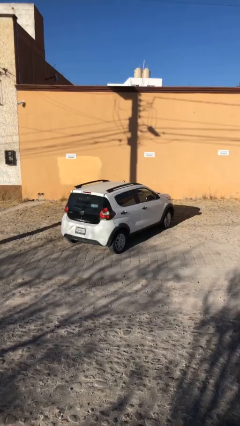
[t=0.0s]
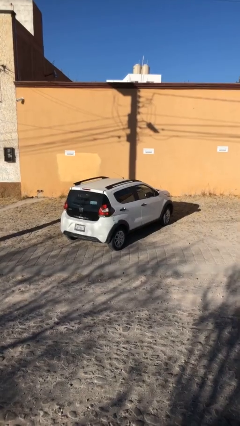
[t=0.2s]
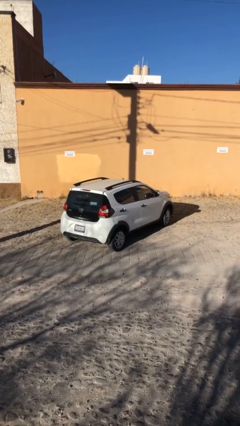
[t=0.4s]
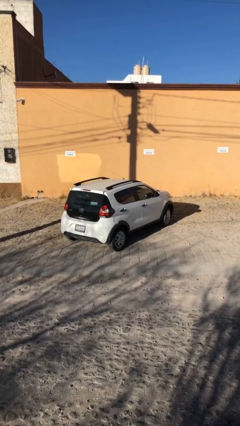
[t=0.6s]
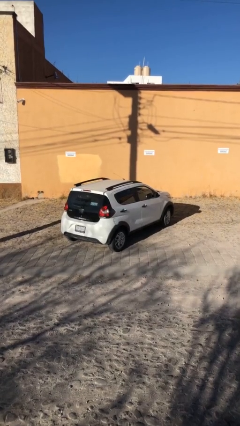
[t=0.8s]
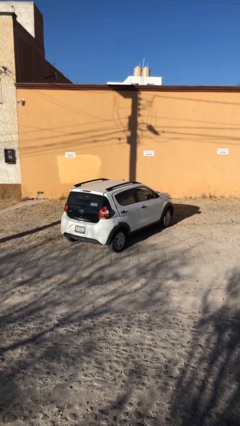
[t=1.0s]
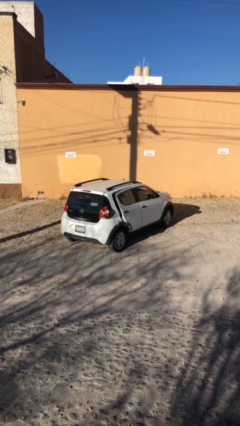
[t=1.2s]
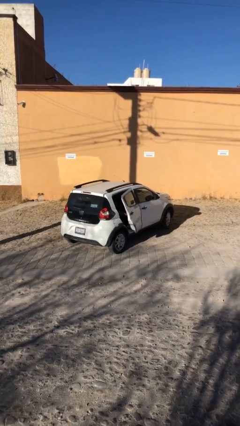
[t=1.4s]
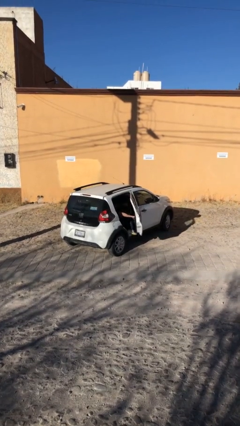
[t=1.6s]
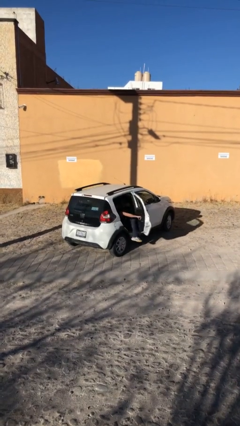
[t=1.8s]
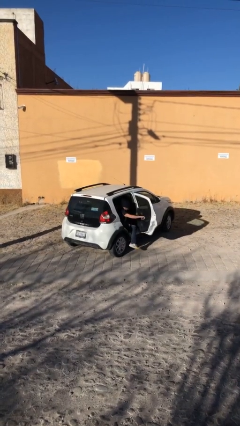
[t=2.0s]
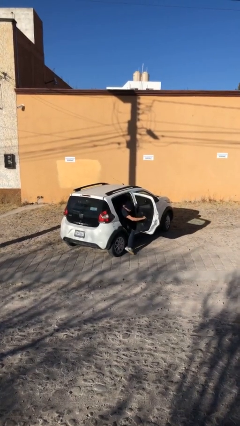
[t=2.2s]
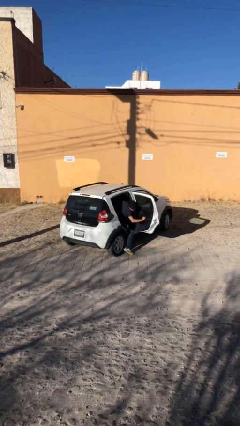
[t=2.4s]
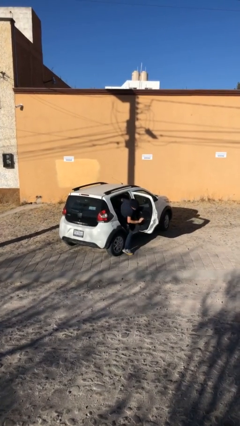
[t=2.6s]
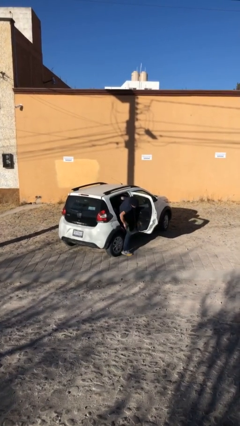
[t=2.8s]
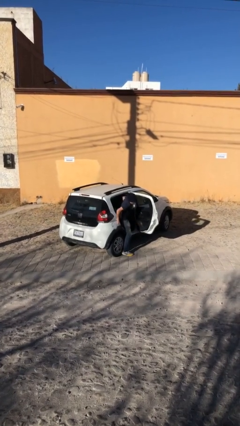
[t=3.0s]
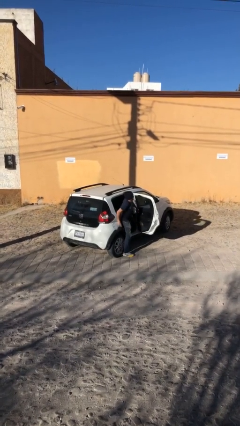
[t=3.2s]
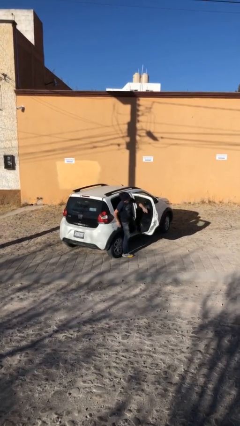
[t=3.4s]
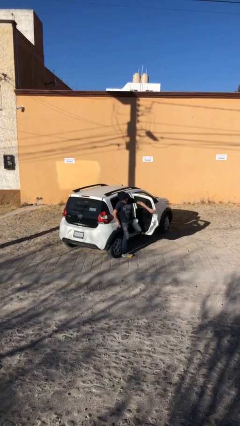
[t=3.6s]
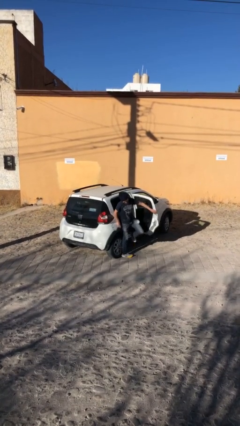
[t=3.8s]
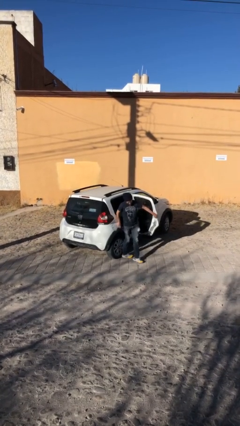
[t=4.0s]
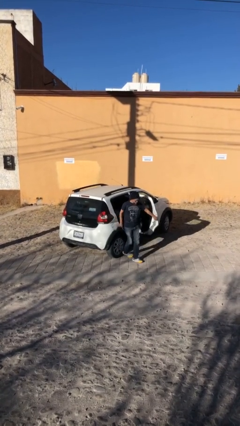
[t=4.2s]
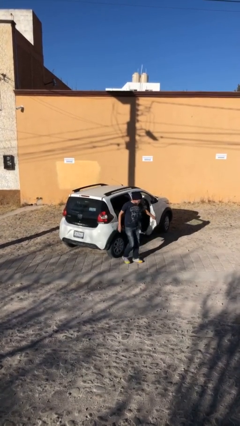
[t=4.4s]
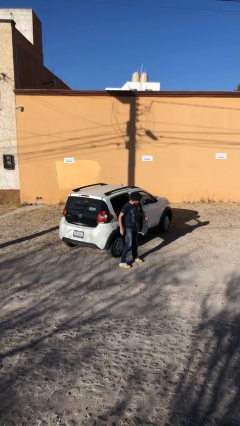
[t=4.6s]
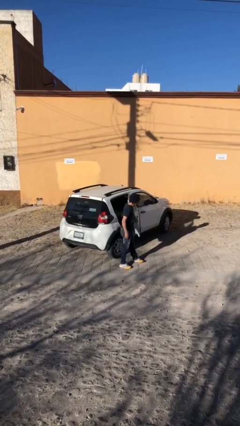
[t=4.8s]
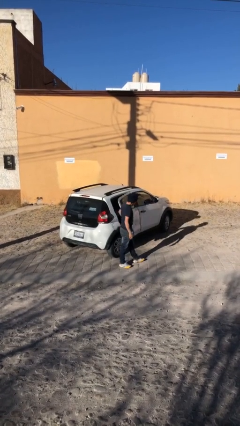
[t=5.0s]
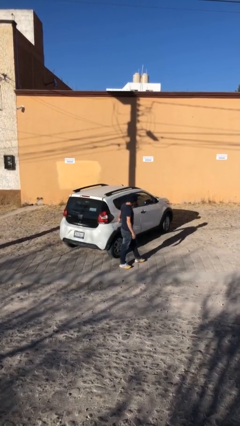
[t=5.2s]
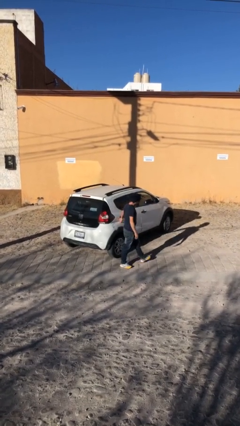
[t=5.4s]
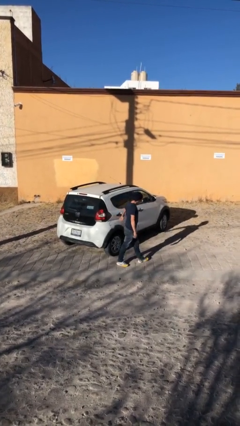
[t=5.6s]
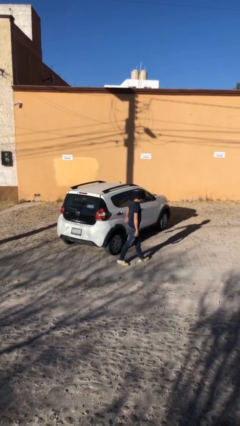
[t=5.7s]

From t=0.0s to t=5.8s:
car drops off person

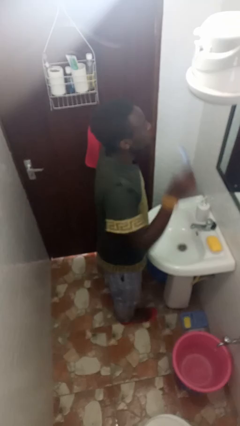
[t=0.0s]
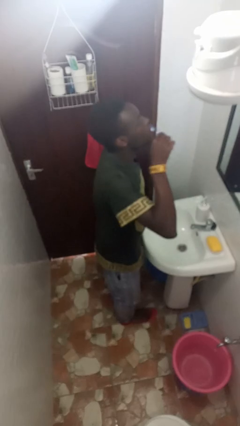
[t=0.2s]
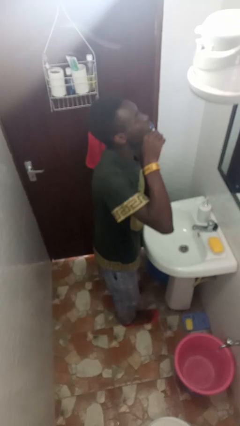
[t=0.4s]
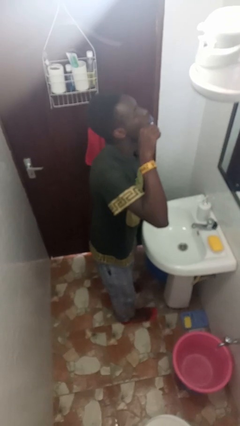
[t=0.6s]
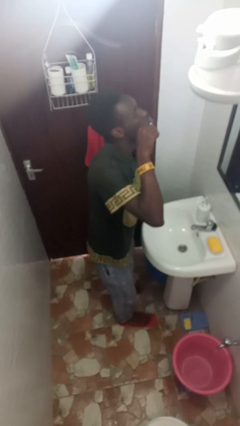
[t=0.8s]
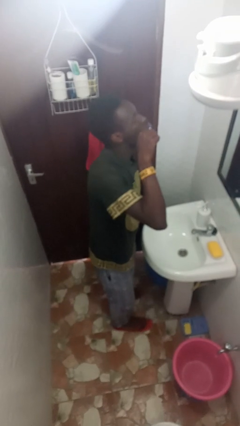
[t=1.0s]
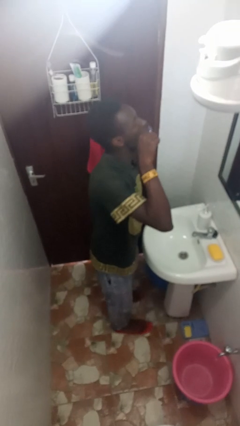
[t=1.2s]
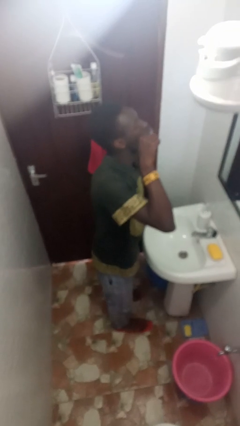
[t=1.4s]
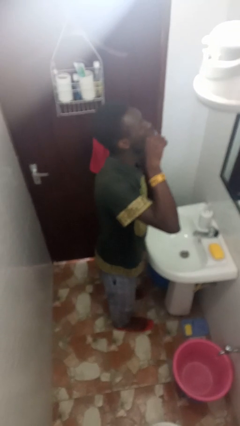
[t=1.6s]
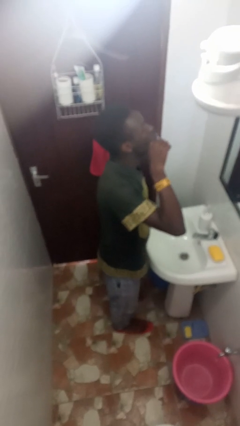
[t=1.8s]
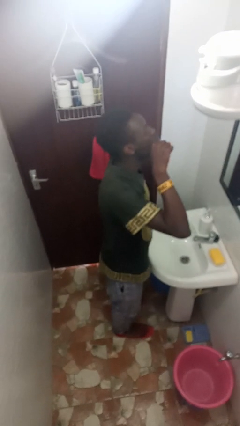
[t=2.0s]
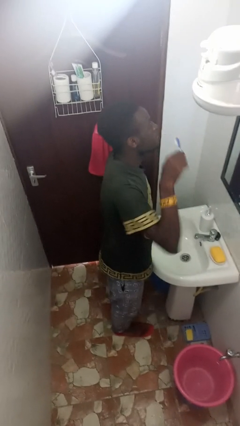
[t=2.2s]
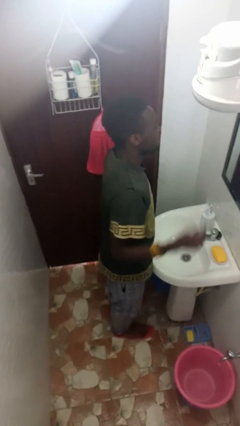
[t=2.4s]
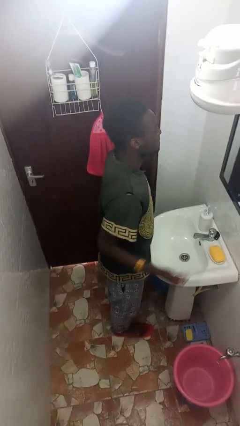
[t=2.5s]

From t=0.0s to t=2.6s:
person brushes teeth

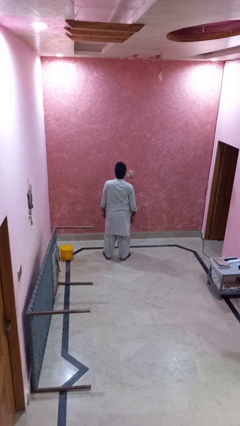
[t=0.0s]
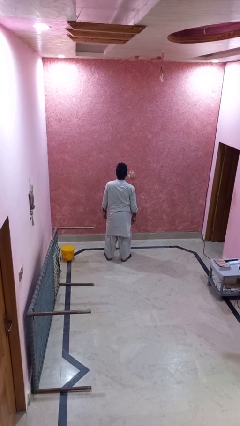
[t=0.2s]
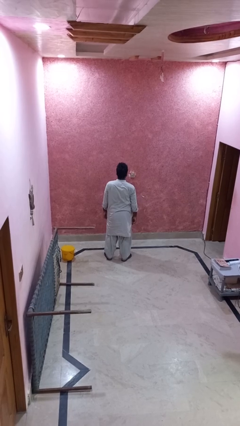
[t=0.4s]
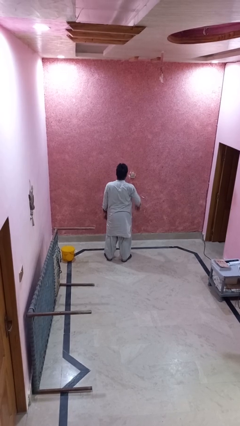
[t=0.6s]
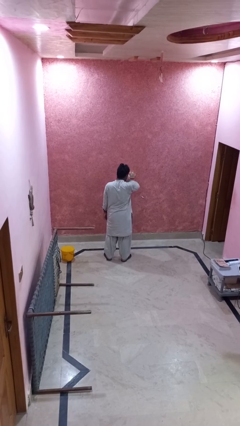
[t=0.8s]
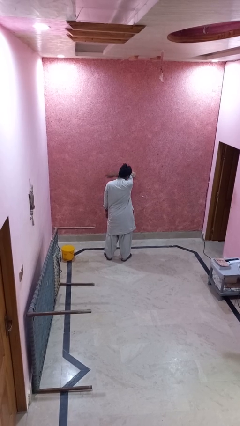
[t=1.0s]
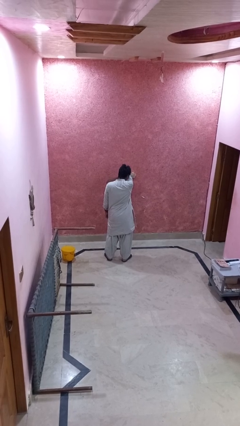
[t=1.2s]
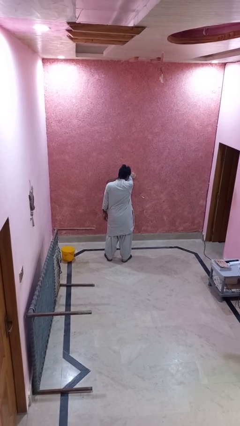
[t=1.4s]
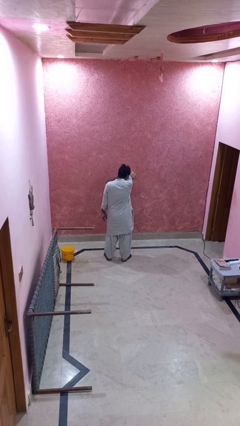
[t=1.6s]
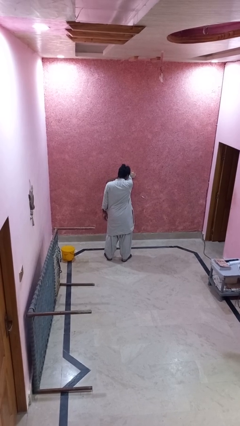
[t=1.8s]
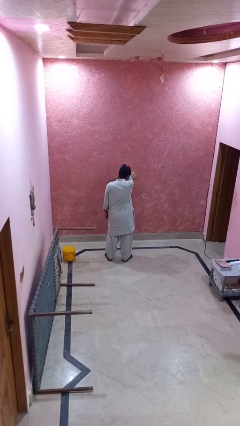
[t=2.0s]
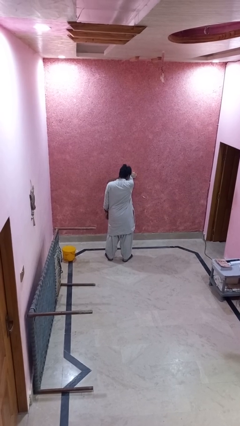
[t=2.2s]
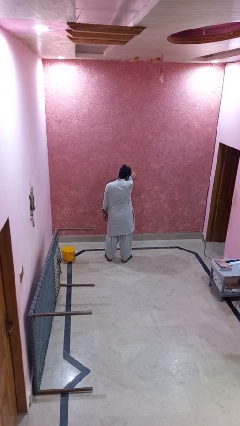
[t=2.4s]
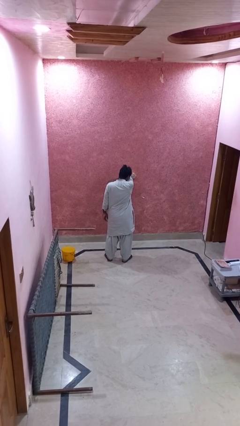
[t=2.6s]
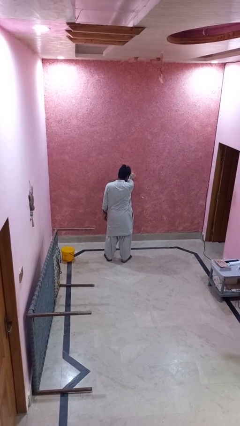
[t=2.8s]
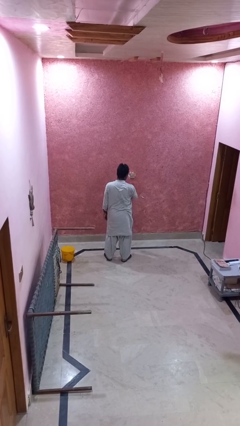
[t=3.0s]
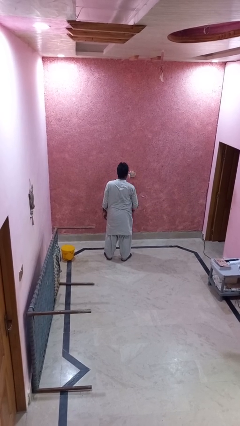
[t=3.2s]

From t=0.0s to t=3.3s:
person sneezes into arm

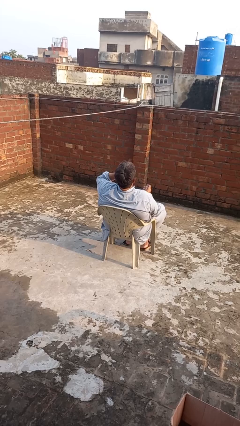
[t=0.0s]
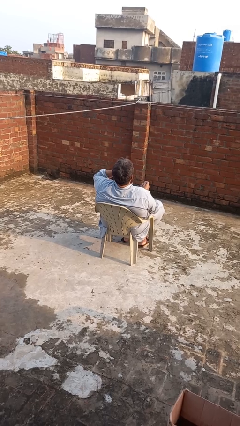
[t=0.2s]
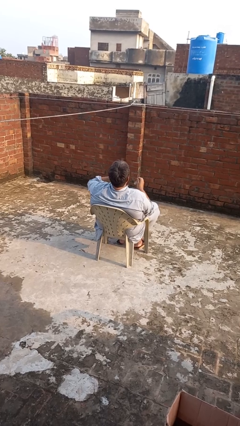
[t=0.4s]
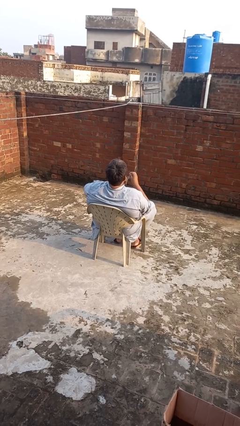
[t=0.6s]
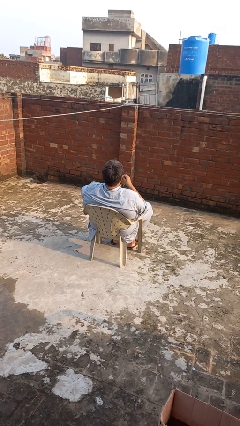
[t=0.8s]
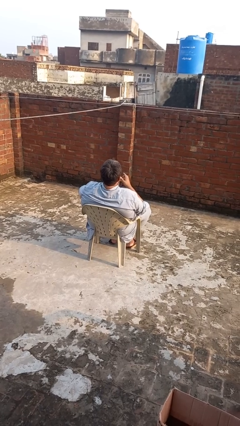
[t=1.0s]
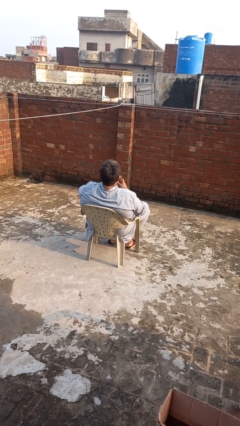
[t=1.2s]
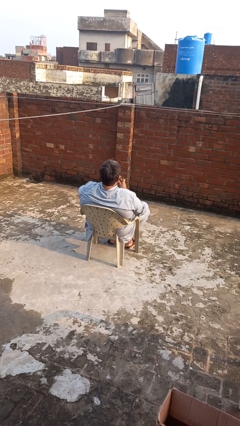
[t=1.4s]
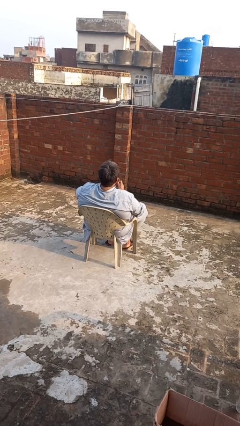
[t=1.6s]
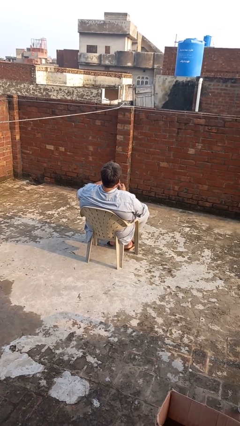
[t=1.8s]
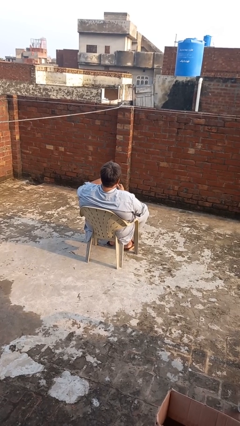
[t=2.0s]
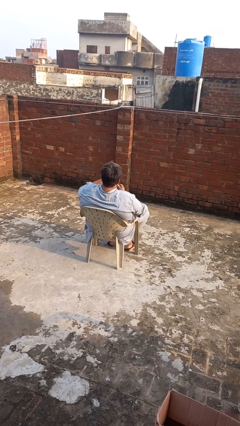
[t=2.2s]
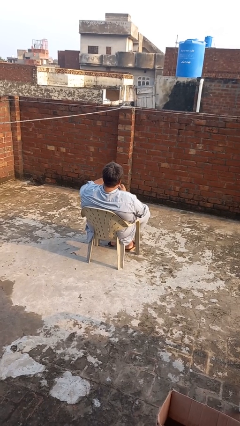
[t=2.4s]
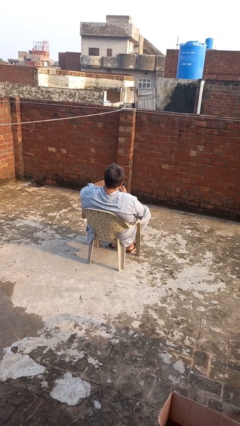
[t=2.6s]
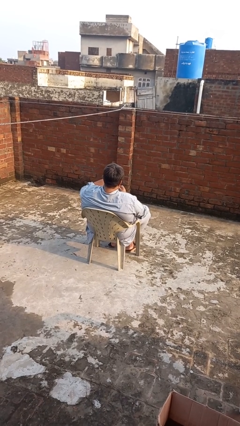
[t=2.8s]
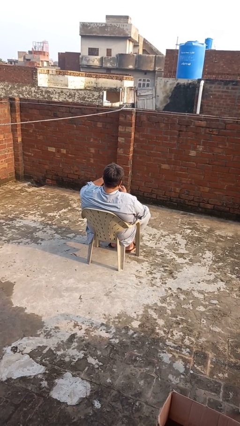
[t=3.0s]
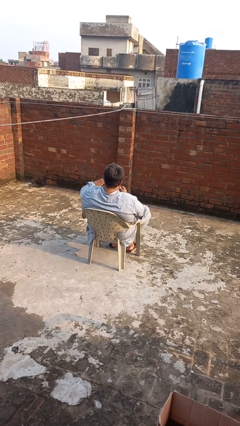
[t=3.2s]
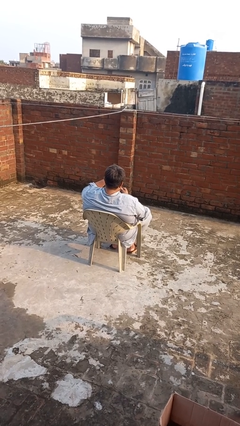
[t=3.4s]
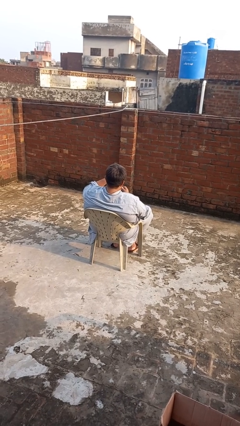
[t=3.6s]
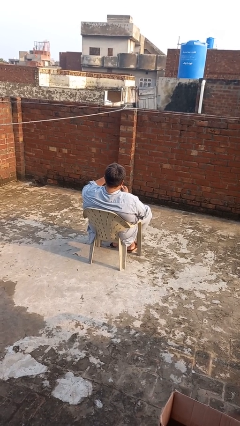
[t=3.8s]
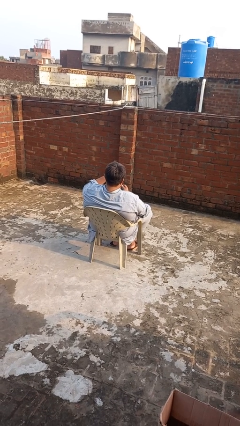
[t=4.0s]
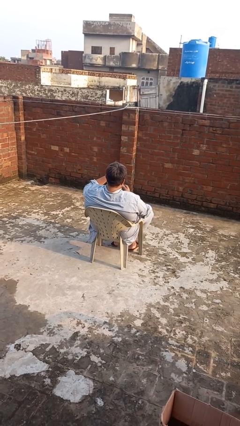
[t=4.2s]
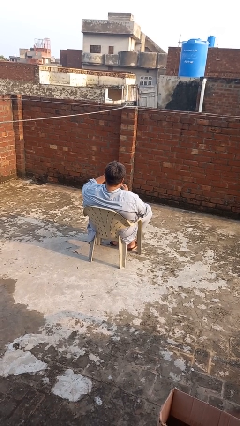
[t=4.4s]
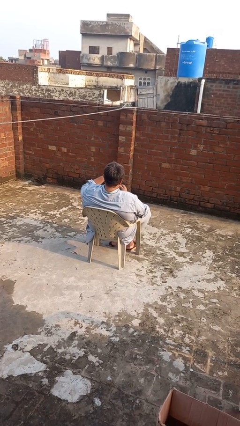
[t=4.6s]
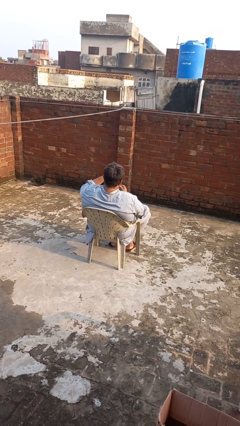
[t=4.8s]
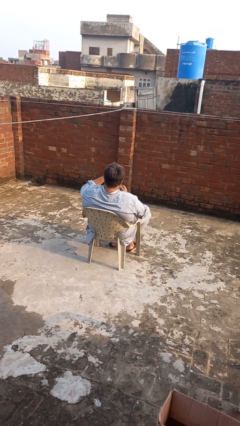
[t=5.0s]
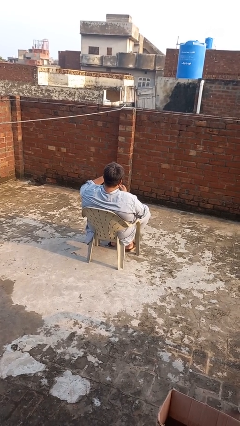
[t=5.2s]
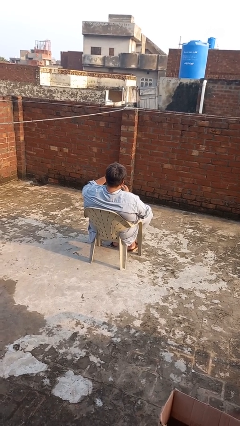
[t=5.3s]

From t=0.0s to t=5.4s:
person stirs mug

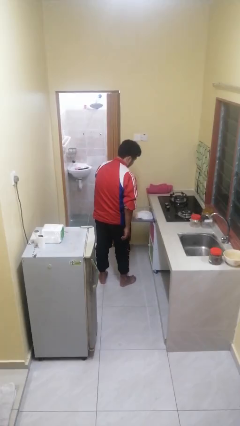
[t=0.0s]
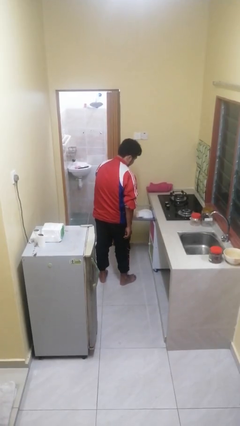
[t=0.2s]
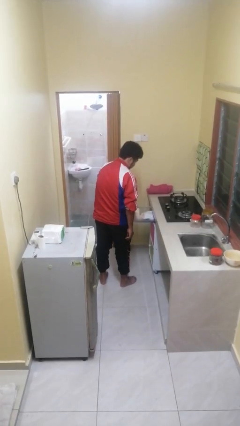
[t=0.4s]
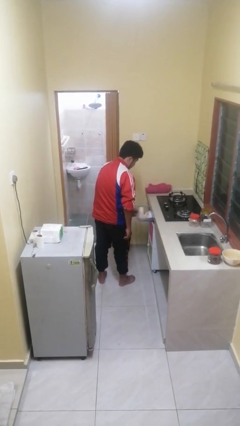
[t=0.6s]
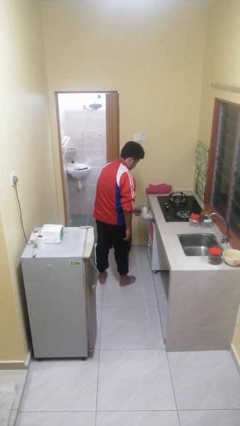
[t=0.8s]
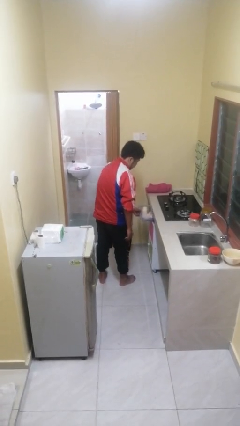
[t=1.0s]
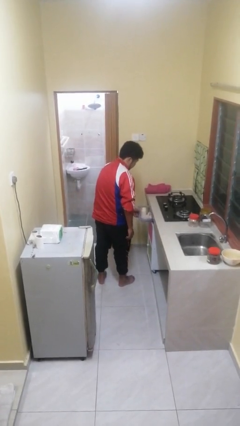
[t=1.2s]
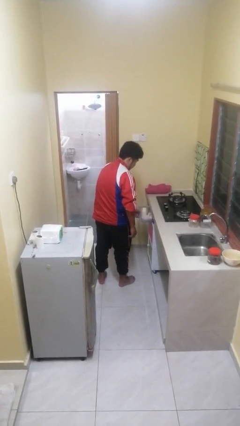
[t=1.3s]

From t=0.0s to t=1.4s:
person closes kitchen drawer
